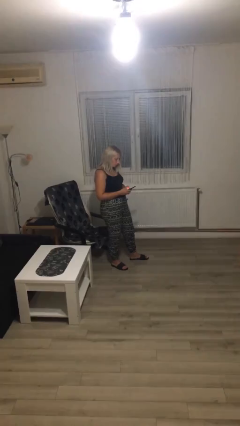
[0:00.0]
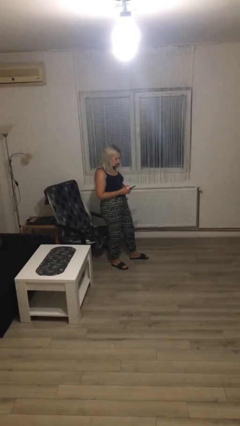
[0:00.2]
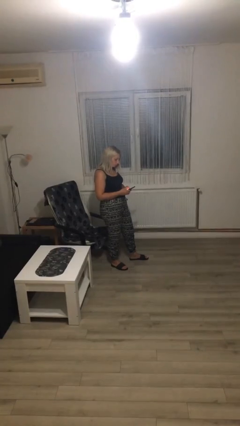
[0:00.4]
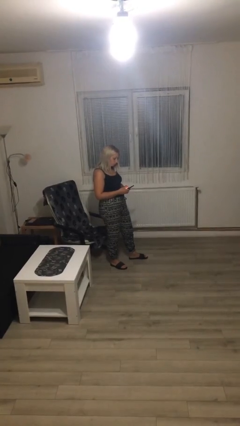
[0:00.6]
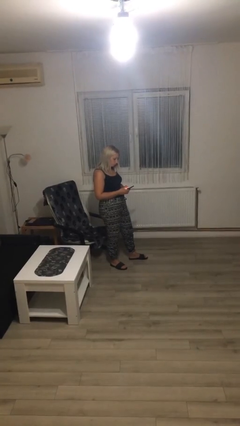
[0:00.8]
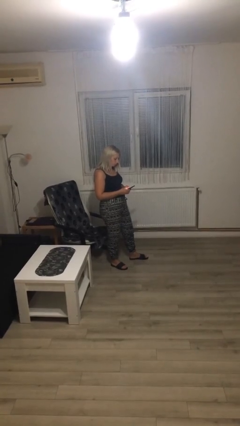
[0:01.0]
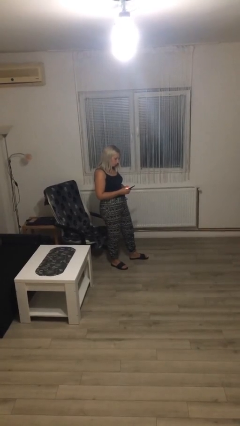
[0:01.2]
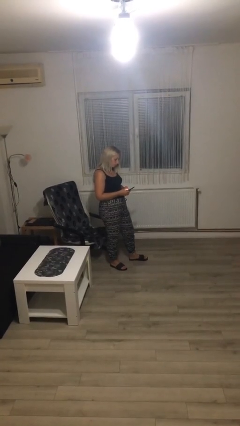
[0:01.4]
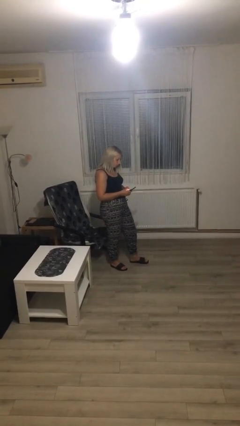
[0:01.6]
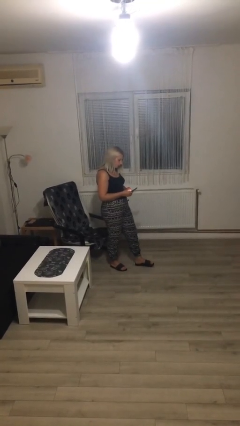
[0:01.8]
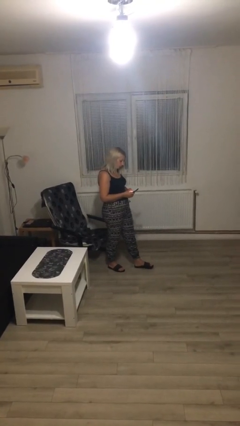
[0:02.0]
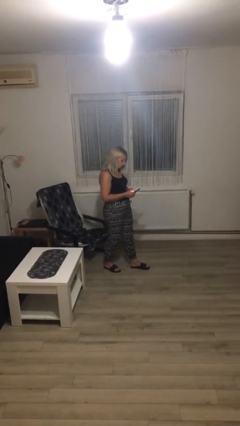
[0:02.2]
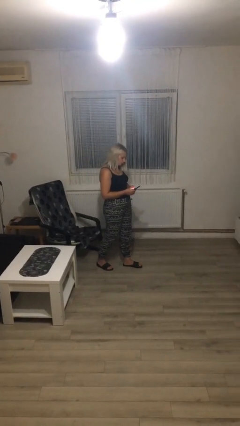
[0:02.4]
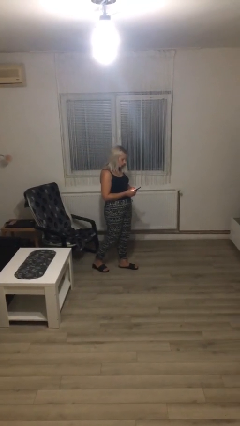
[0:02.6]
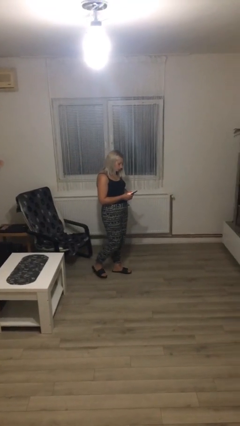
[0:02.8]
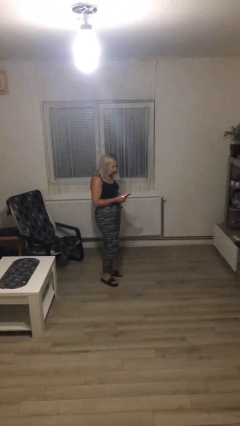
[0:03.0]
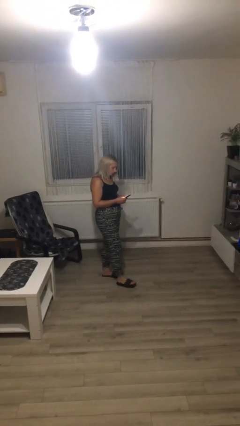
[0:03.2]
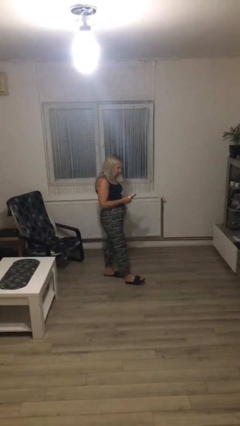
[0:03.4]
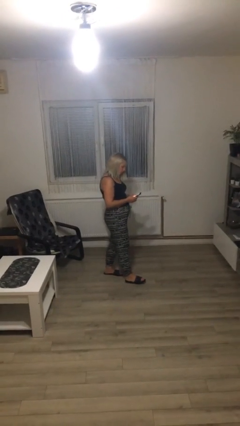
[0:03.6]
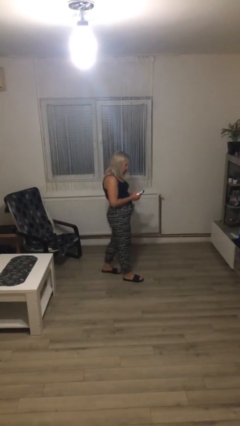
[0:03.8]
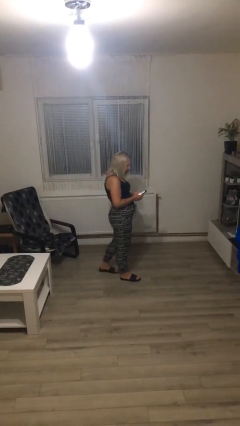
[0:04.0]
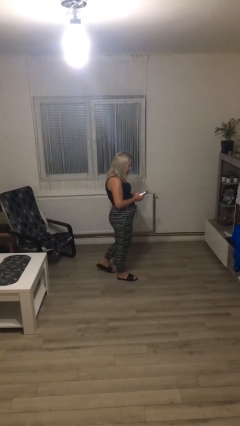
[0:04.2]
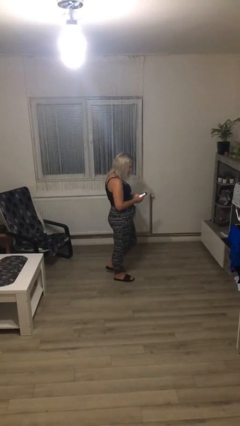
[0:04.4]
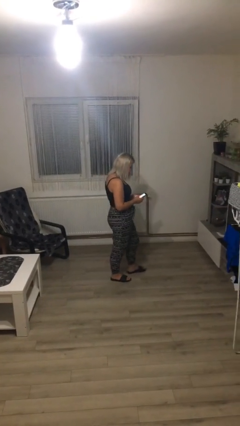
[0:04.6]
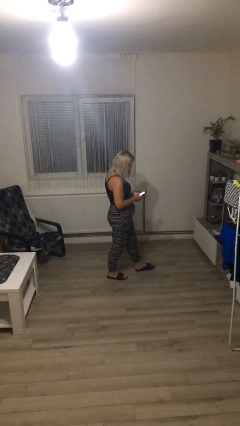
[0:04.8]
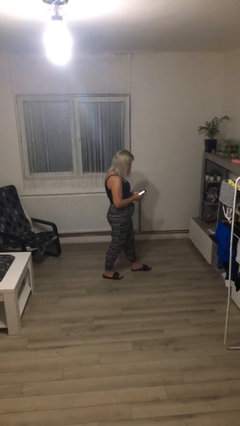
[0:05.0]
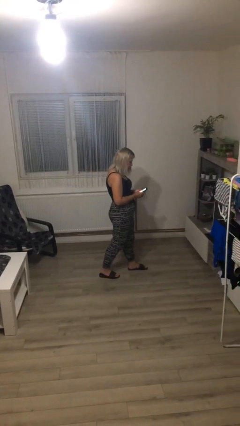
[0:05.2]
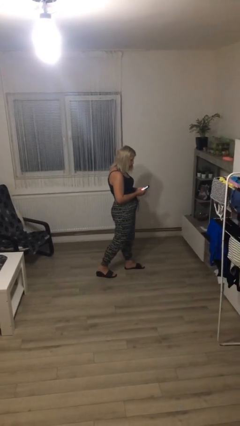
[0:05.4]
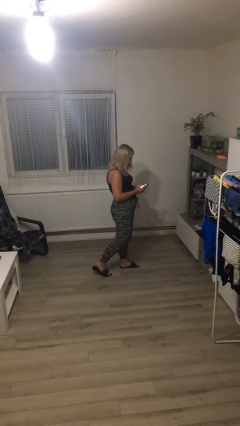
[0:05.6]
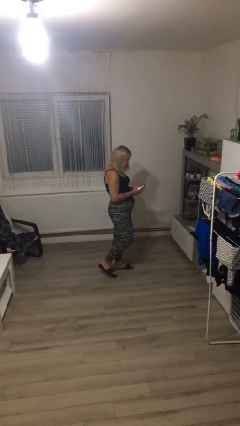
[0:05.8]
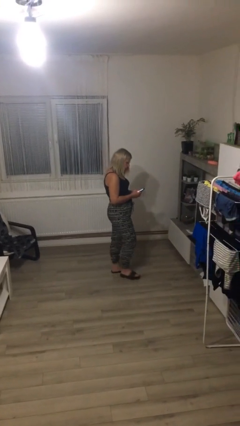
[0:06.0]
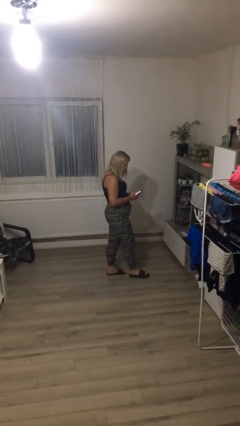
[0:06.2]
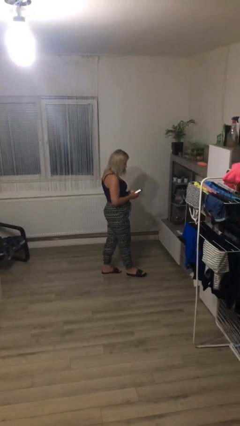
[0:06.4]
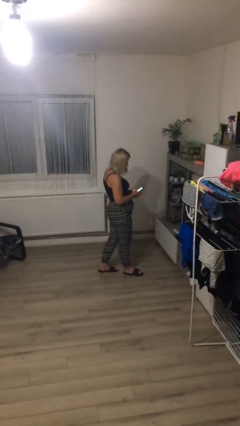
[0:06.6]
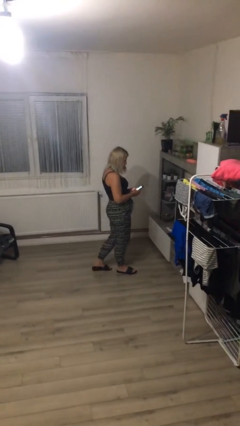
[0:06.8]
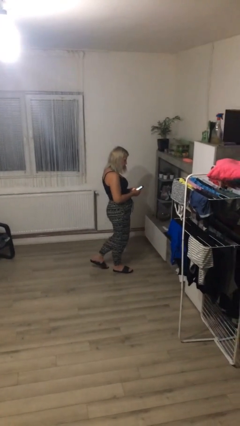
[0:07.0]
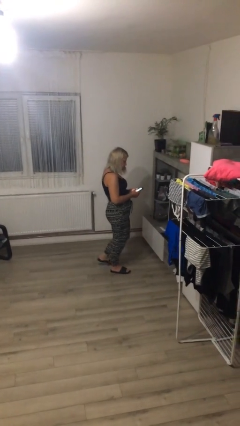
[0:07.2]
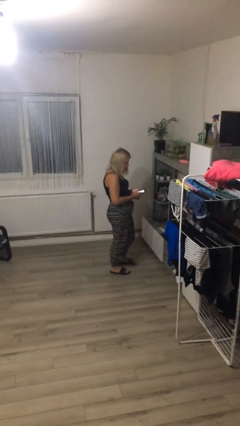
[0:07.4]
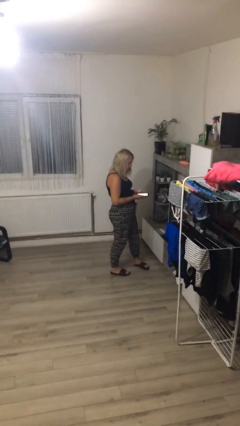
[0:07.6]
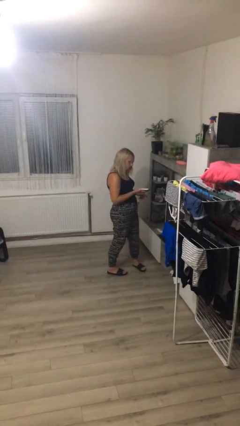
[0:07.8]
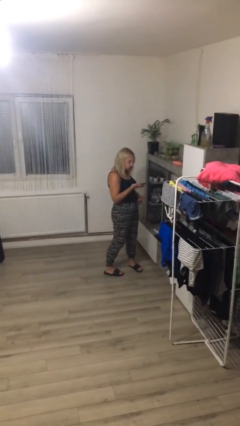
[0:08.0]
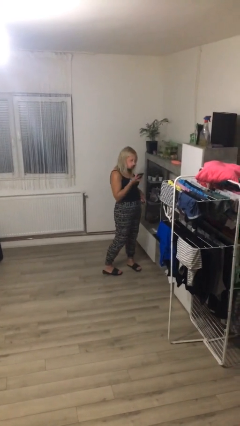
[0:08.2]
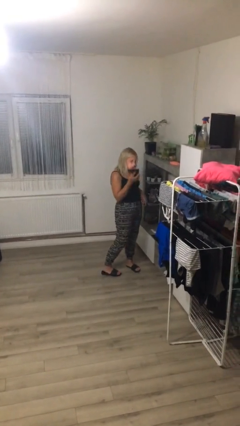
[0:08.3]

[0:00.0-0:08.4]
person texts on phone

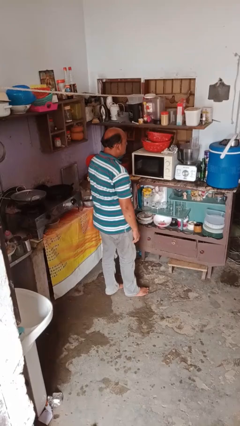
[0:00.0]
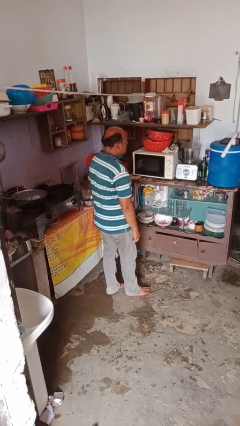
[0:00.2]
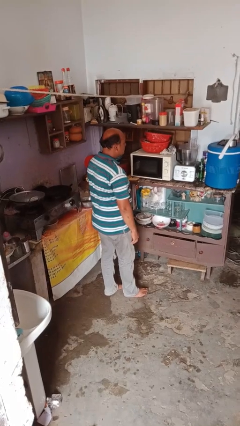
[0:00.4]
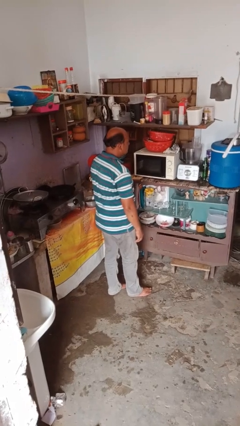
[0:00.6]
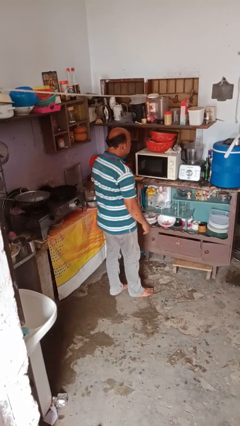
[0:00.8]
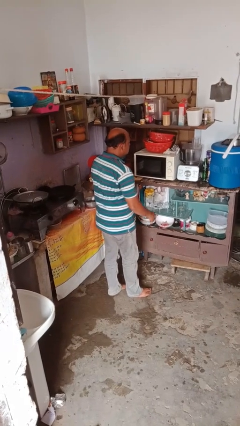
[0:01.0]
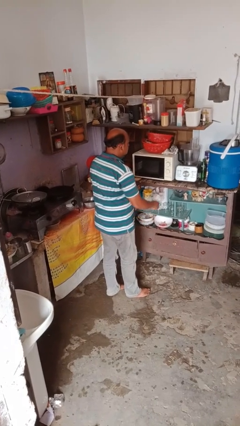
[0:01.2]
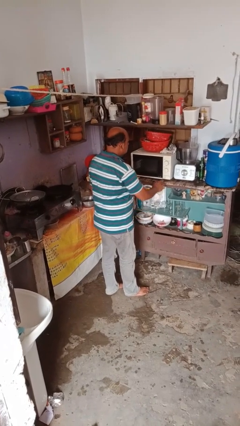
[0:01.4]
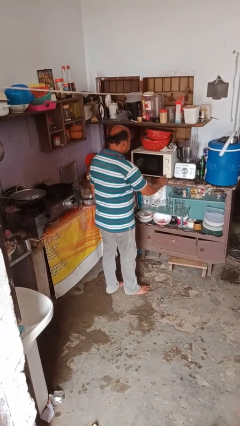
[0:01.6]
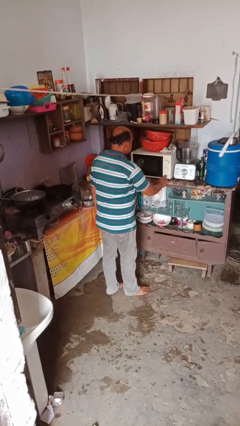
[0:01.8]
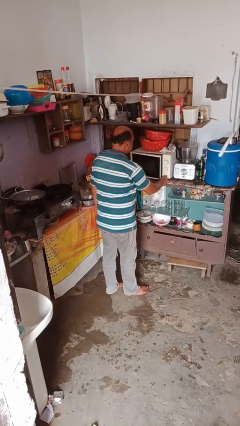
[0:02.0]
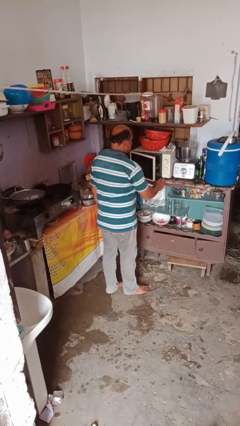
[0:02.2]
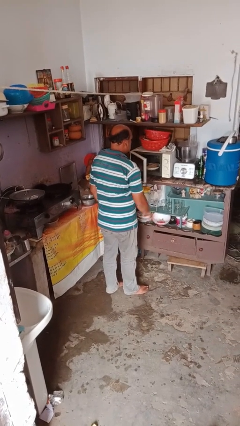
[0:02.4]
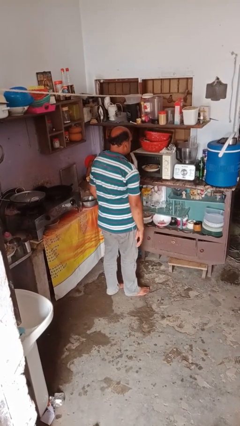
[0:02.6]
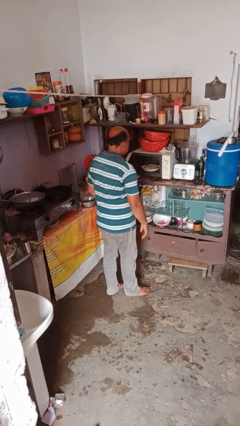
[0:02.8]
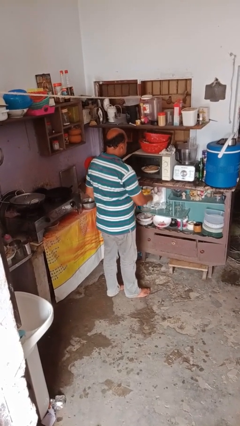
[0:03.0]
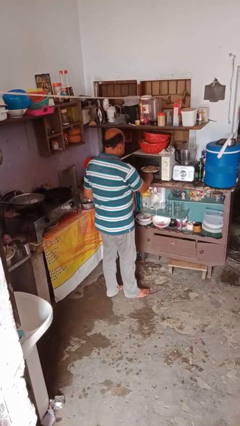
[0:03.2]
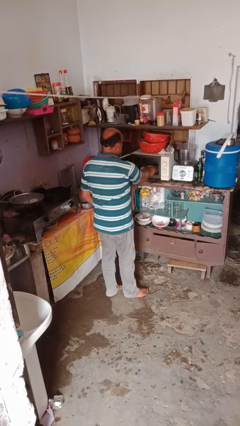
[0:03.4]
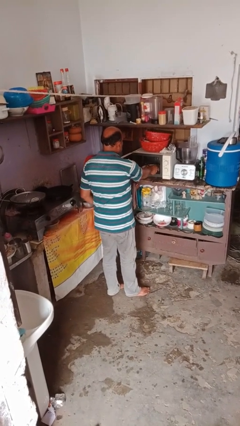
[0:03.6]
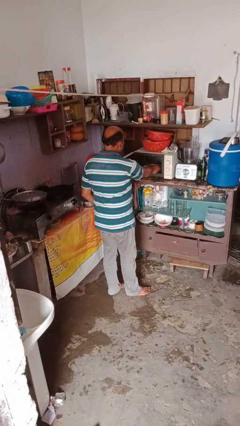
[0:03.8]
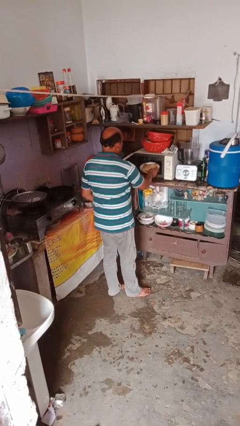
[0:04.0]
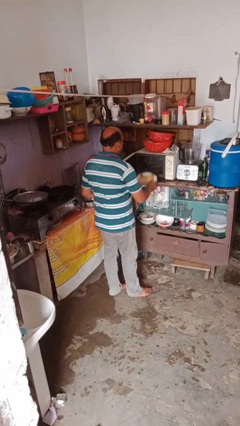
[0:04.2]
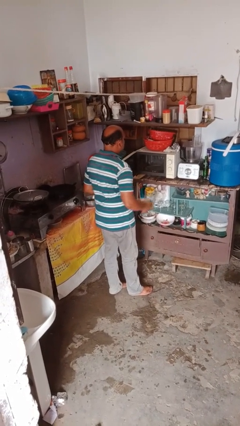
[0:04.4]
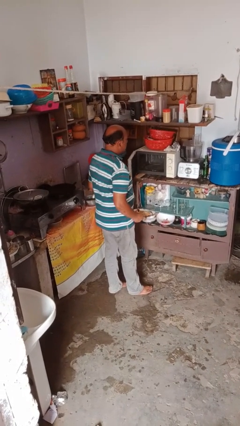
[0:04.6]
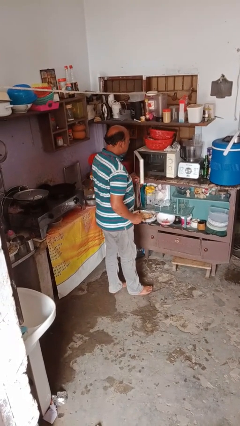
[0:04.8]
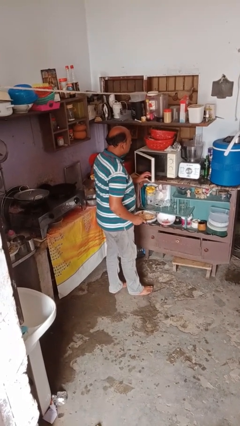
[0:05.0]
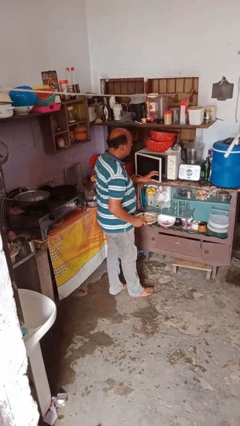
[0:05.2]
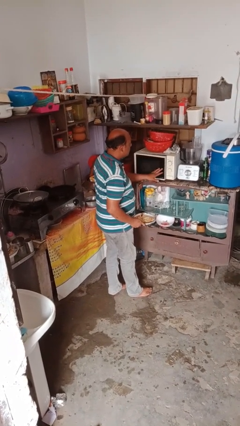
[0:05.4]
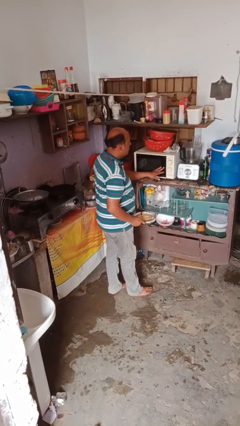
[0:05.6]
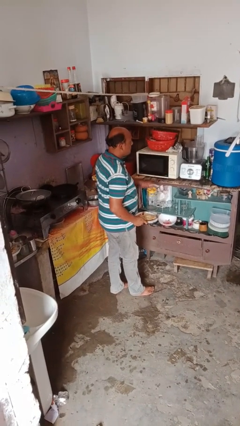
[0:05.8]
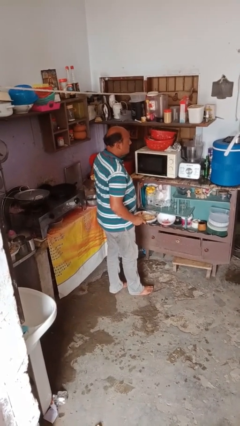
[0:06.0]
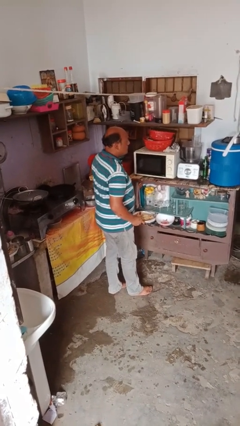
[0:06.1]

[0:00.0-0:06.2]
person takes object from microwave

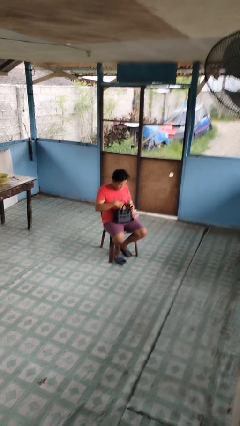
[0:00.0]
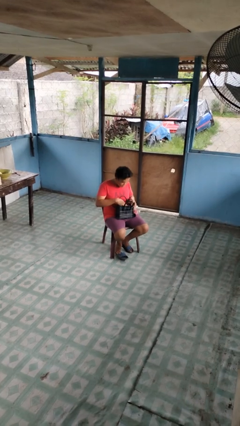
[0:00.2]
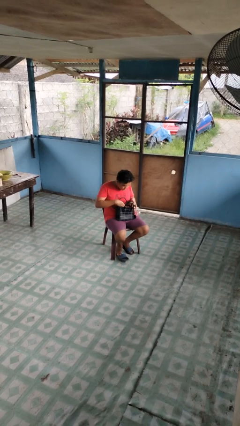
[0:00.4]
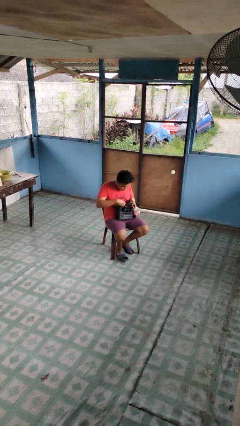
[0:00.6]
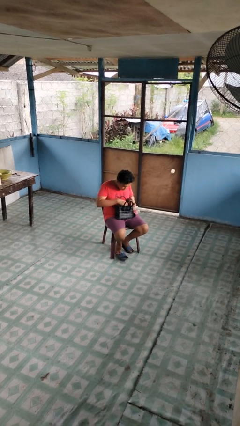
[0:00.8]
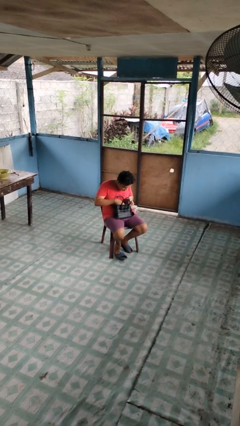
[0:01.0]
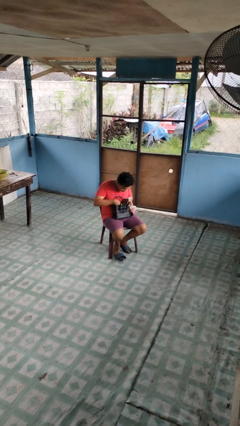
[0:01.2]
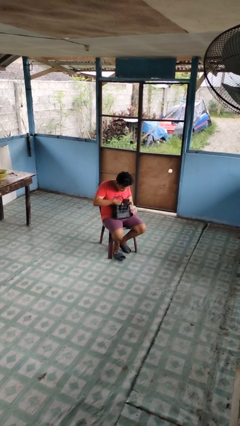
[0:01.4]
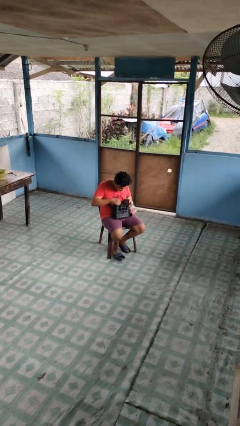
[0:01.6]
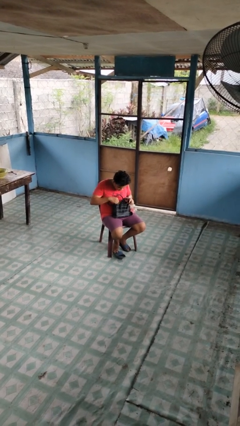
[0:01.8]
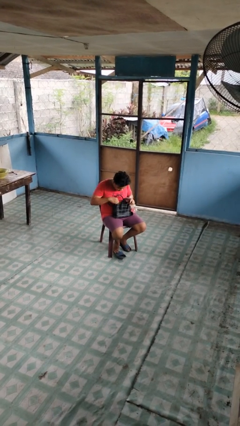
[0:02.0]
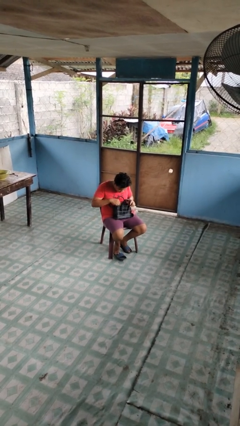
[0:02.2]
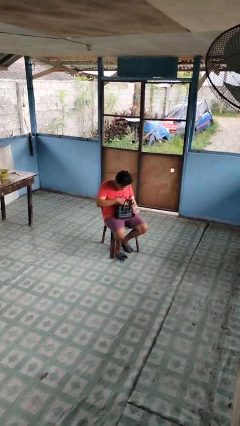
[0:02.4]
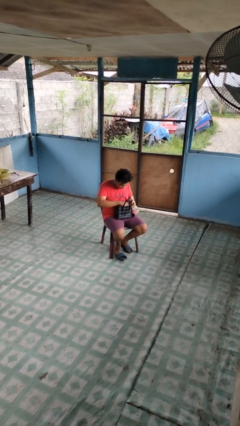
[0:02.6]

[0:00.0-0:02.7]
person searches in purse

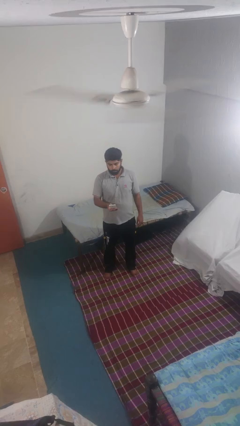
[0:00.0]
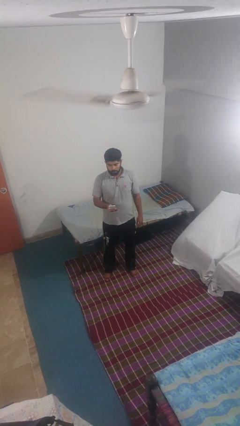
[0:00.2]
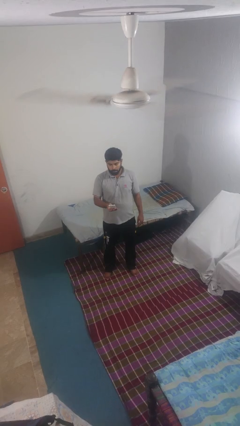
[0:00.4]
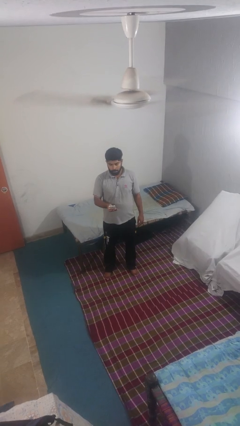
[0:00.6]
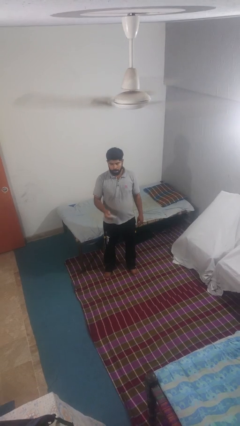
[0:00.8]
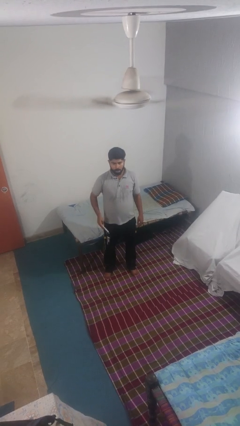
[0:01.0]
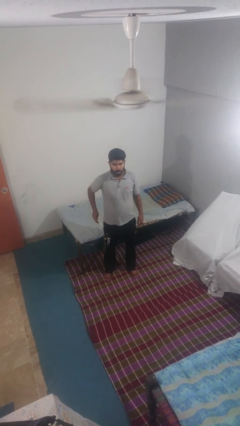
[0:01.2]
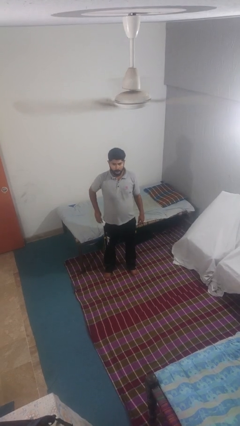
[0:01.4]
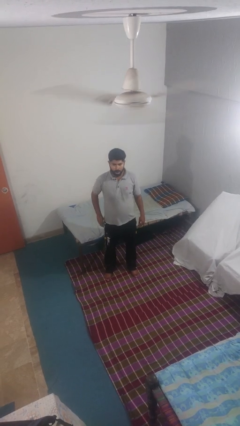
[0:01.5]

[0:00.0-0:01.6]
person puts phone into pocket
